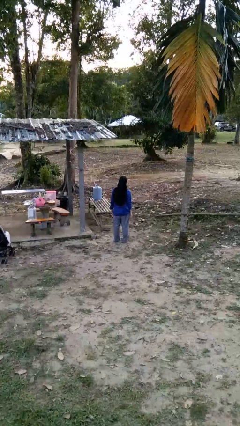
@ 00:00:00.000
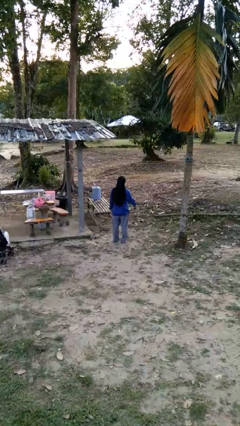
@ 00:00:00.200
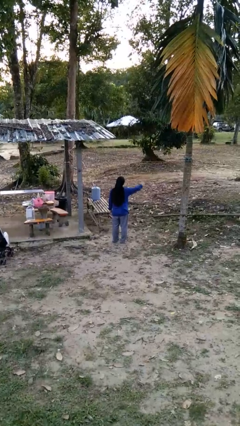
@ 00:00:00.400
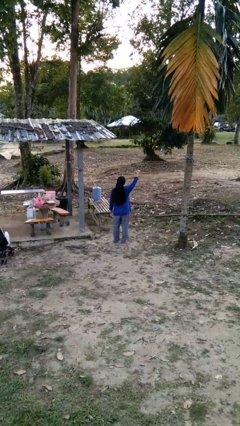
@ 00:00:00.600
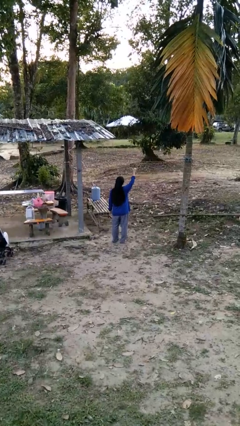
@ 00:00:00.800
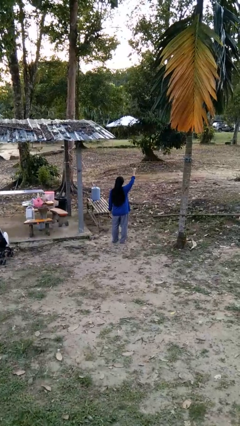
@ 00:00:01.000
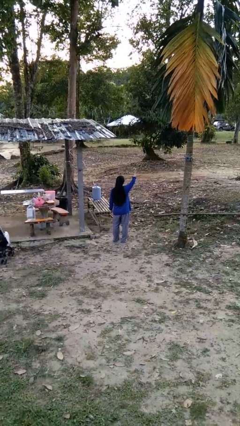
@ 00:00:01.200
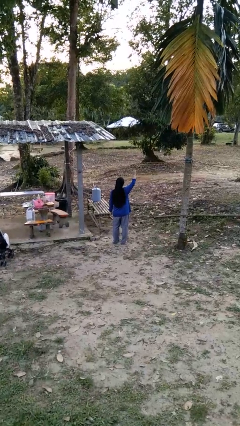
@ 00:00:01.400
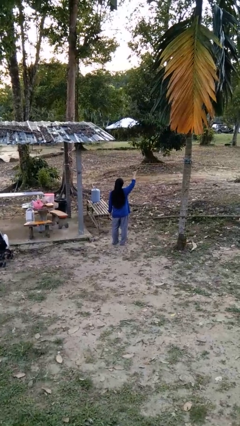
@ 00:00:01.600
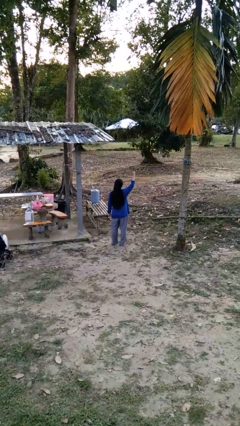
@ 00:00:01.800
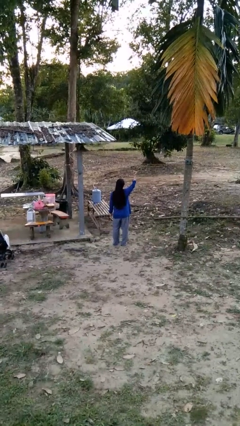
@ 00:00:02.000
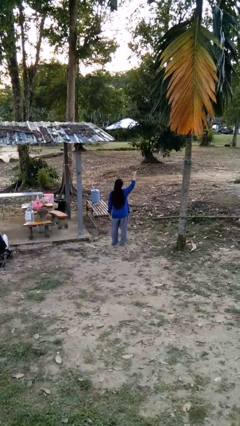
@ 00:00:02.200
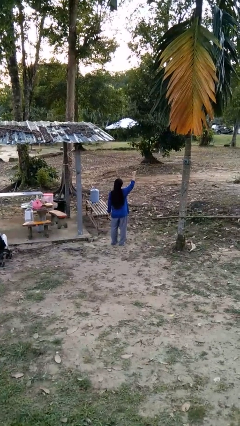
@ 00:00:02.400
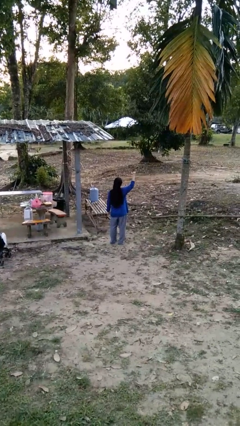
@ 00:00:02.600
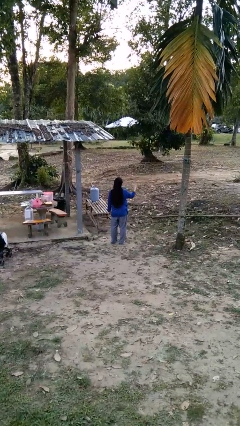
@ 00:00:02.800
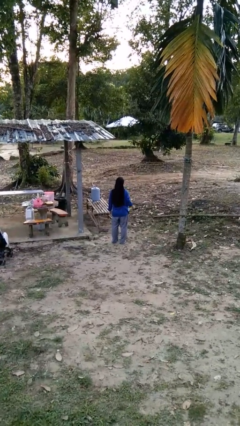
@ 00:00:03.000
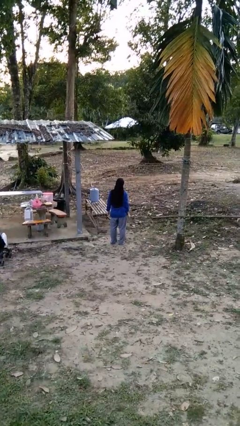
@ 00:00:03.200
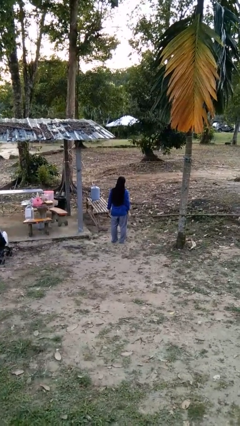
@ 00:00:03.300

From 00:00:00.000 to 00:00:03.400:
person gestures hang loose

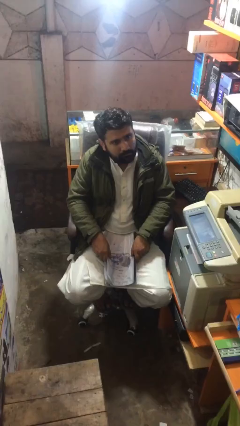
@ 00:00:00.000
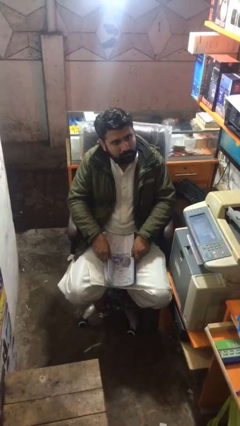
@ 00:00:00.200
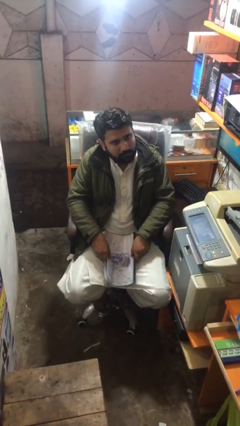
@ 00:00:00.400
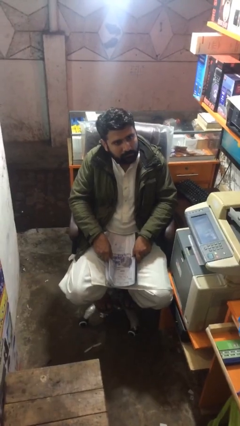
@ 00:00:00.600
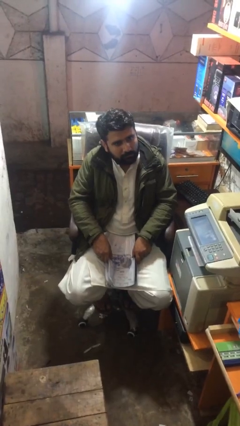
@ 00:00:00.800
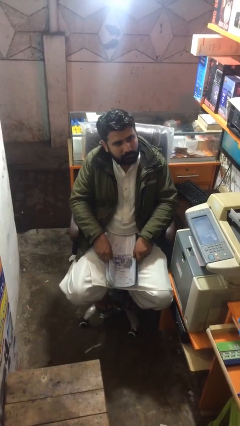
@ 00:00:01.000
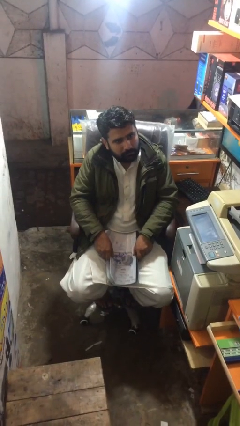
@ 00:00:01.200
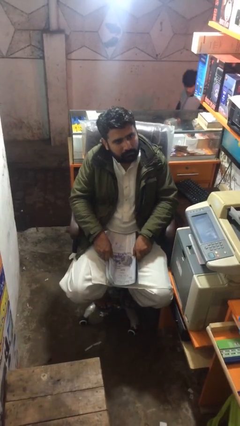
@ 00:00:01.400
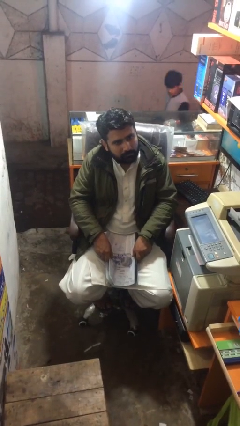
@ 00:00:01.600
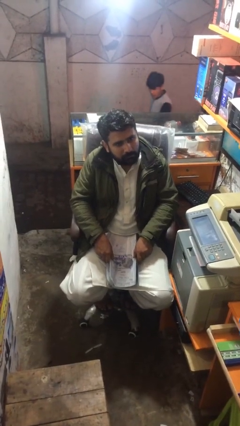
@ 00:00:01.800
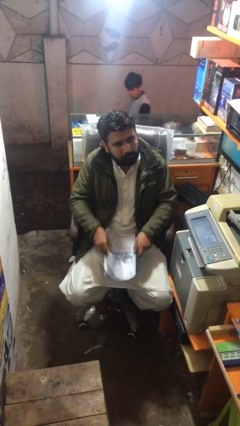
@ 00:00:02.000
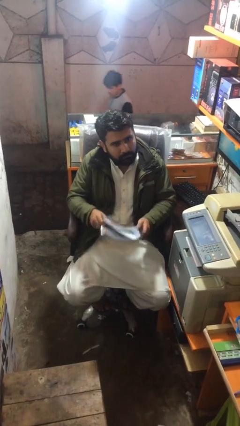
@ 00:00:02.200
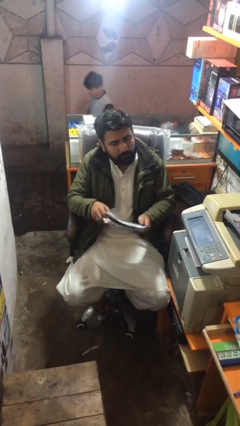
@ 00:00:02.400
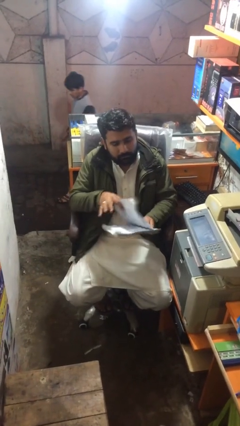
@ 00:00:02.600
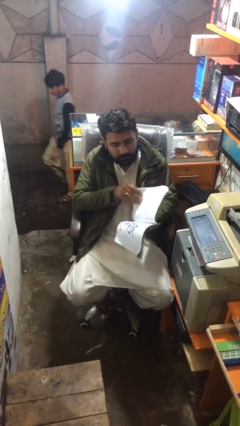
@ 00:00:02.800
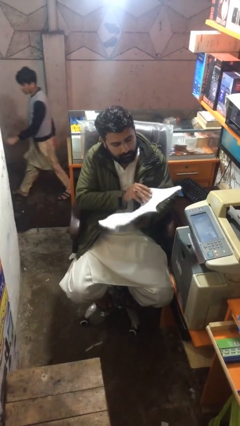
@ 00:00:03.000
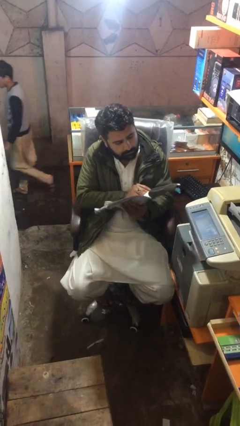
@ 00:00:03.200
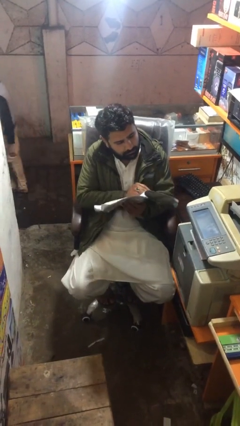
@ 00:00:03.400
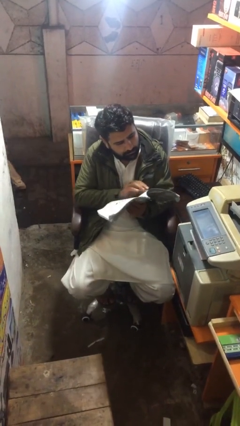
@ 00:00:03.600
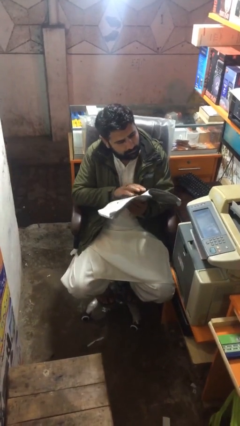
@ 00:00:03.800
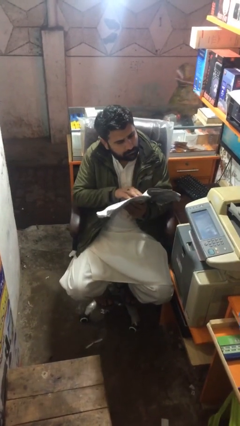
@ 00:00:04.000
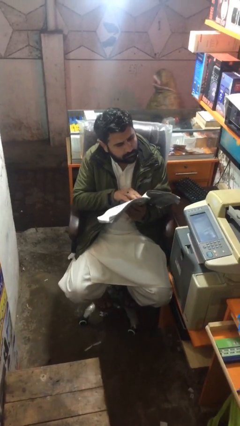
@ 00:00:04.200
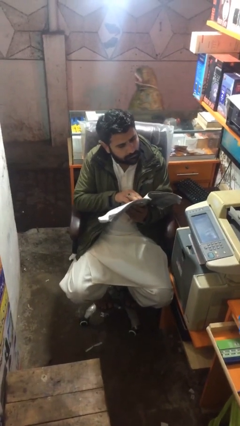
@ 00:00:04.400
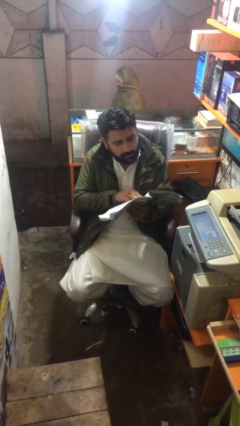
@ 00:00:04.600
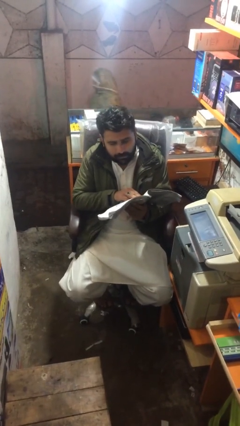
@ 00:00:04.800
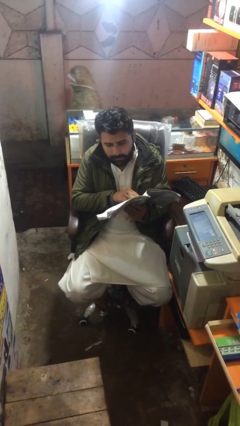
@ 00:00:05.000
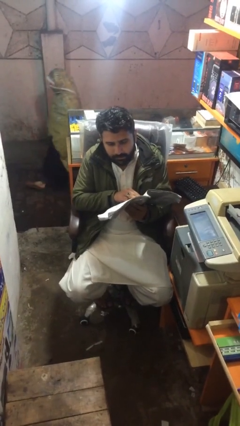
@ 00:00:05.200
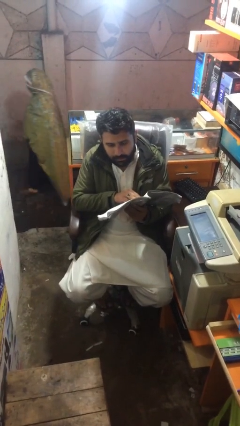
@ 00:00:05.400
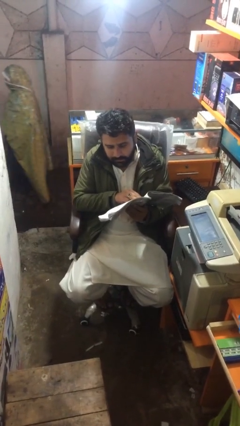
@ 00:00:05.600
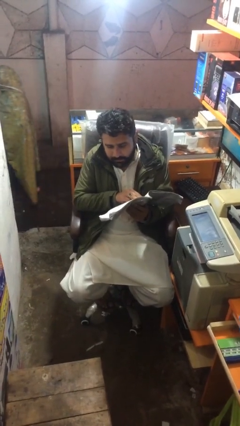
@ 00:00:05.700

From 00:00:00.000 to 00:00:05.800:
person reads document

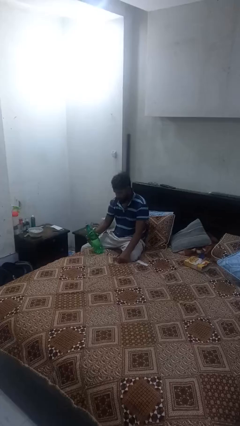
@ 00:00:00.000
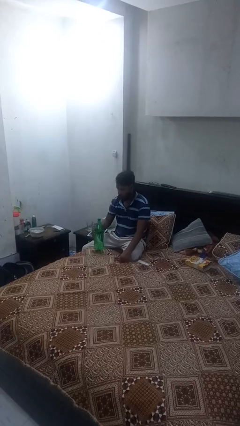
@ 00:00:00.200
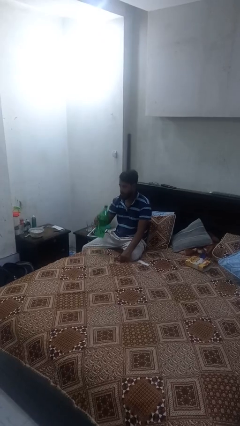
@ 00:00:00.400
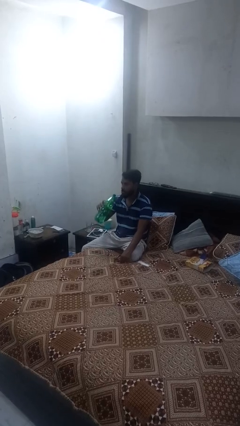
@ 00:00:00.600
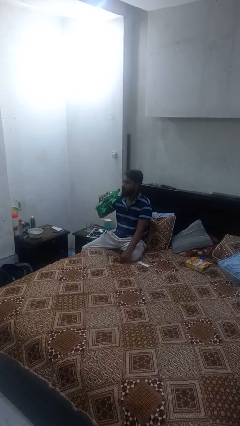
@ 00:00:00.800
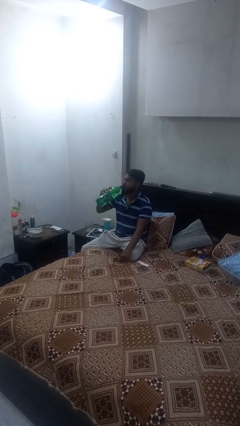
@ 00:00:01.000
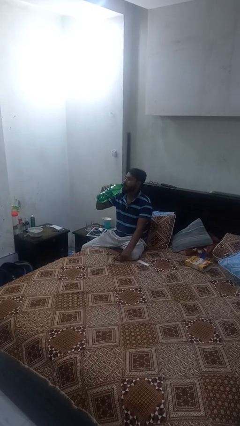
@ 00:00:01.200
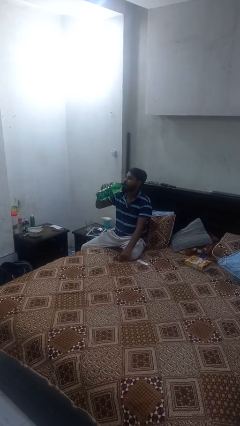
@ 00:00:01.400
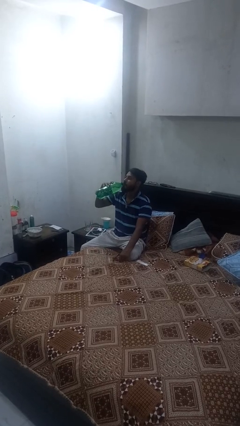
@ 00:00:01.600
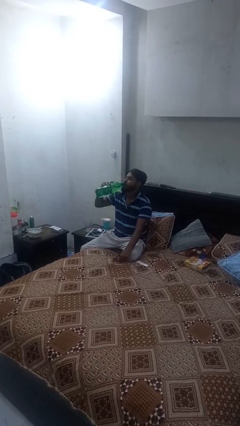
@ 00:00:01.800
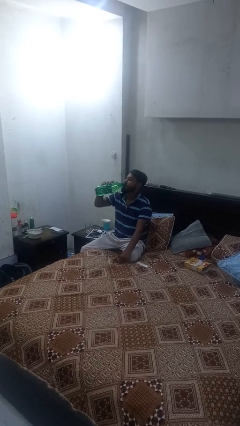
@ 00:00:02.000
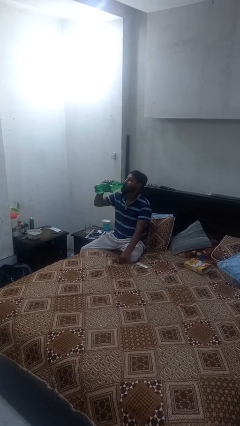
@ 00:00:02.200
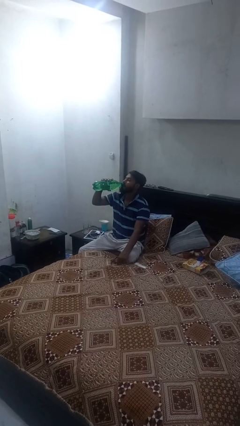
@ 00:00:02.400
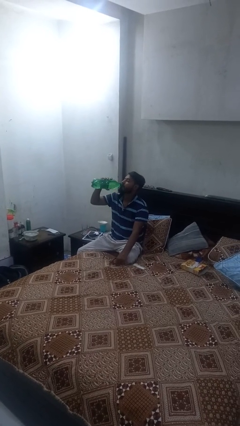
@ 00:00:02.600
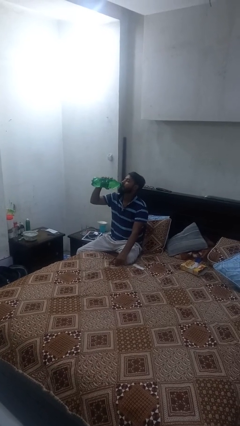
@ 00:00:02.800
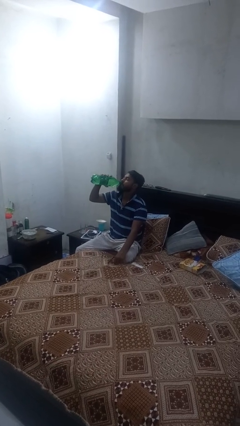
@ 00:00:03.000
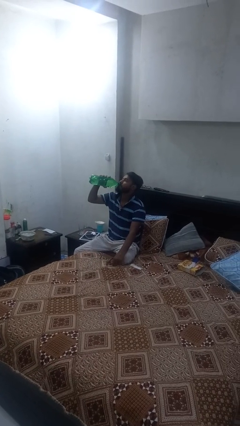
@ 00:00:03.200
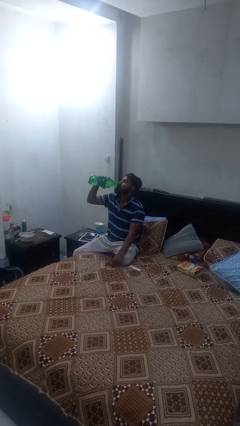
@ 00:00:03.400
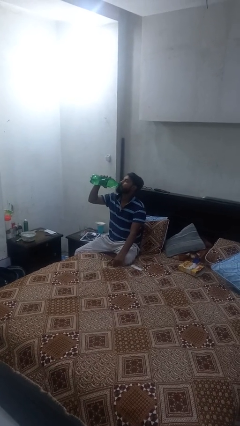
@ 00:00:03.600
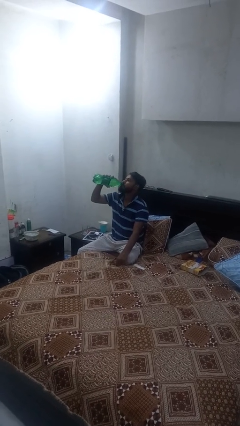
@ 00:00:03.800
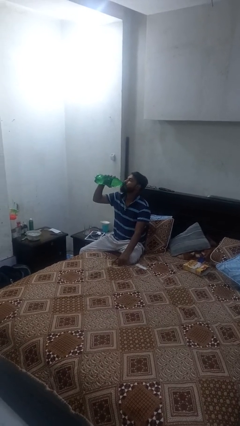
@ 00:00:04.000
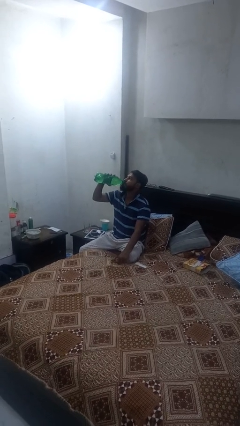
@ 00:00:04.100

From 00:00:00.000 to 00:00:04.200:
person drinks from bottle

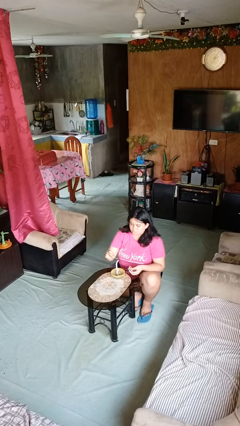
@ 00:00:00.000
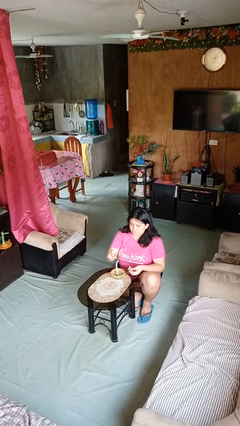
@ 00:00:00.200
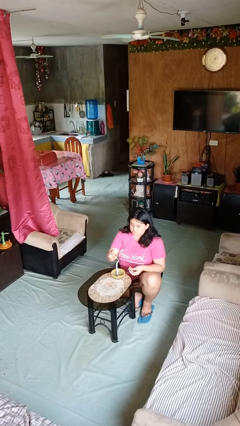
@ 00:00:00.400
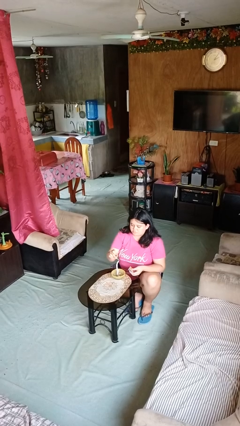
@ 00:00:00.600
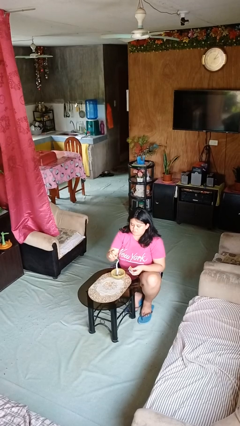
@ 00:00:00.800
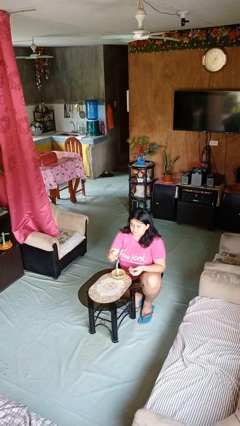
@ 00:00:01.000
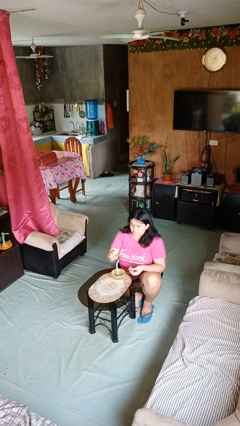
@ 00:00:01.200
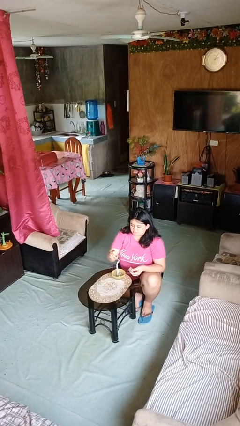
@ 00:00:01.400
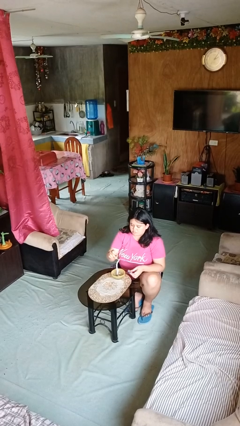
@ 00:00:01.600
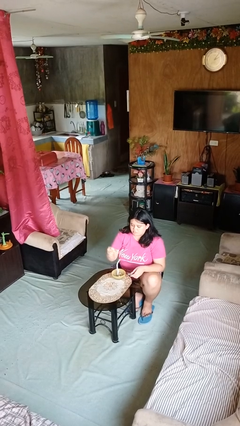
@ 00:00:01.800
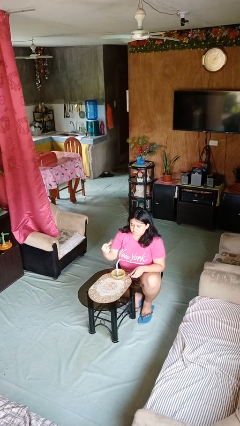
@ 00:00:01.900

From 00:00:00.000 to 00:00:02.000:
person lights candle

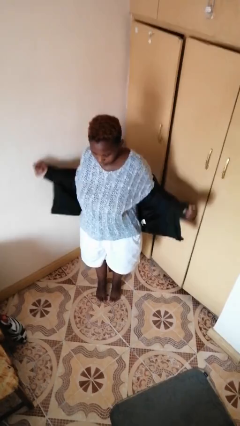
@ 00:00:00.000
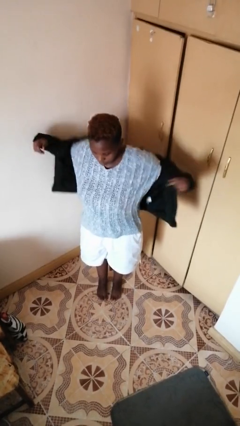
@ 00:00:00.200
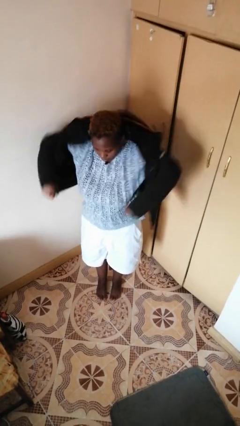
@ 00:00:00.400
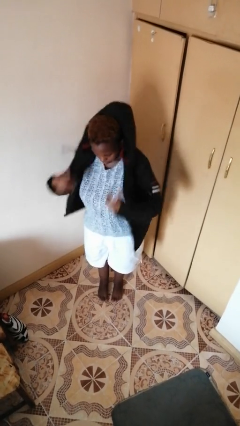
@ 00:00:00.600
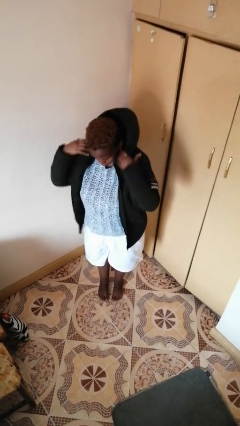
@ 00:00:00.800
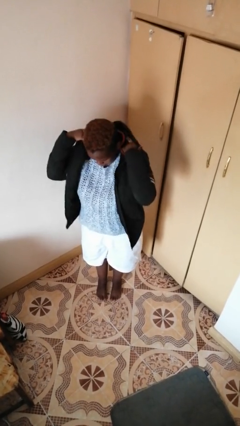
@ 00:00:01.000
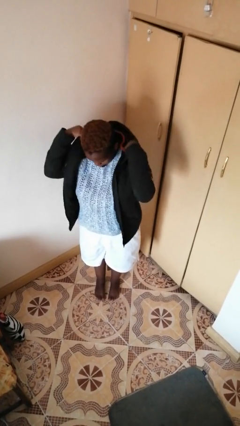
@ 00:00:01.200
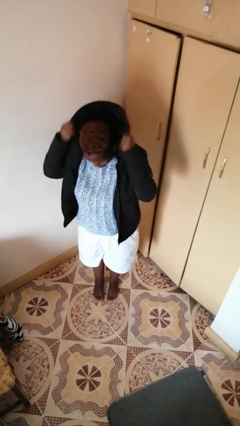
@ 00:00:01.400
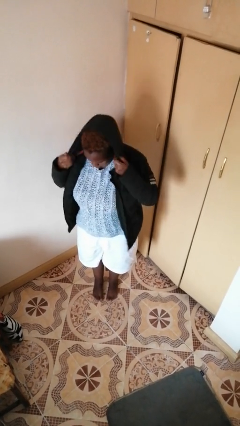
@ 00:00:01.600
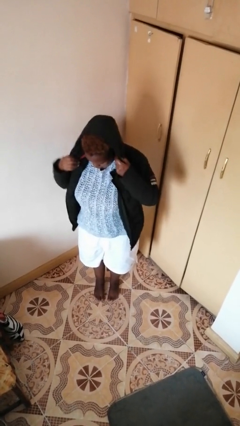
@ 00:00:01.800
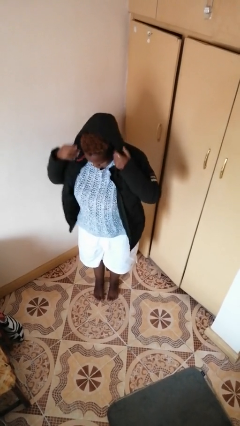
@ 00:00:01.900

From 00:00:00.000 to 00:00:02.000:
person puts on hoodie
